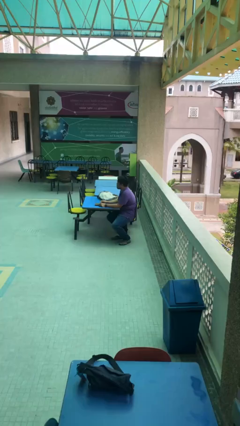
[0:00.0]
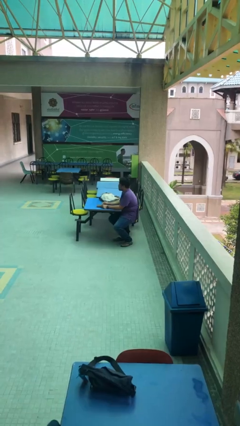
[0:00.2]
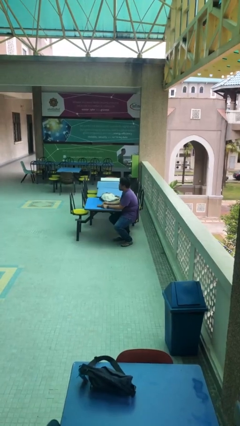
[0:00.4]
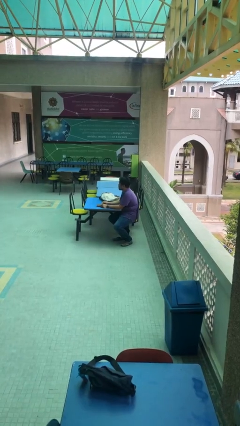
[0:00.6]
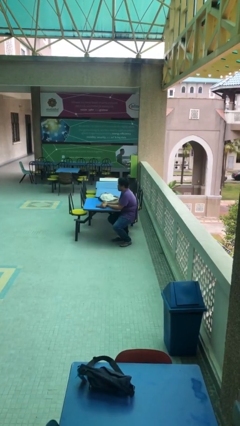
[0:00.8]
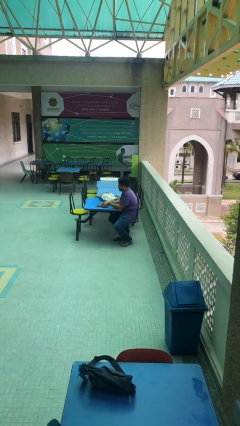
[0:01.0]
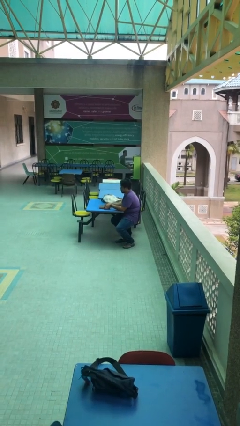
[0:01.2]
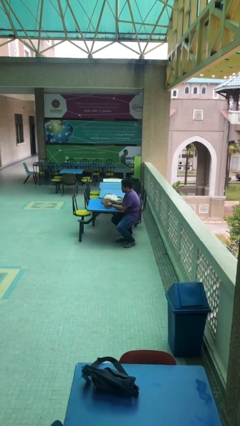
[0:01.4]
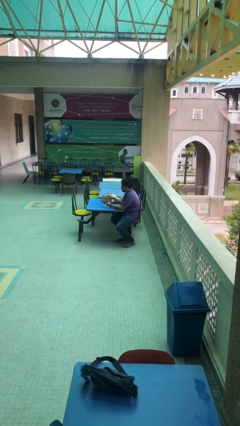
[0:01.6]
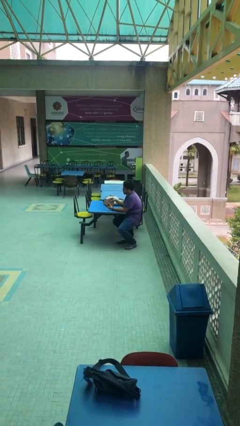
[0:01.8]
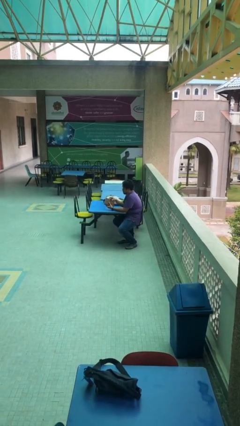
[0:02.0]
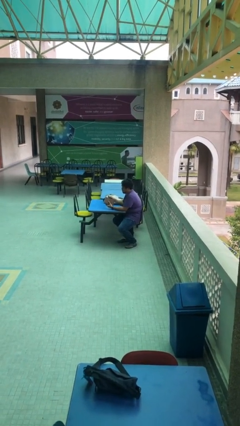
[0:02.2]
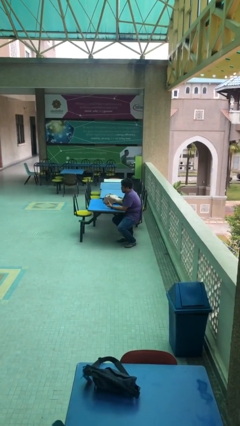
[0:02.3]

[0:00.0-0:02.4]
person picks up object from table

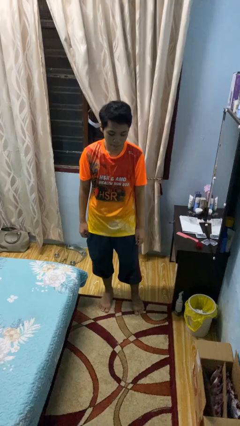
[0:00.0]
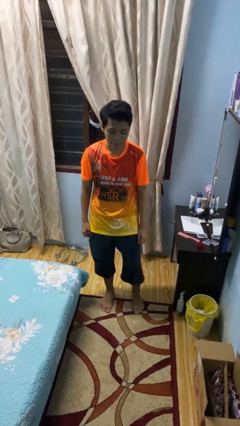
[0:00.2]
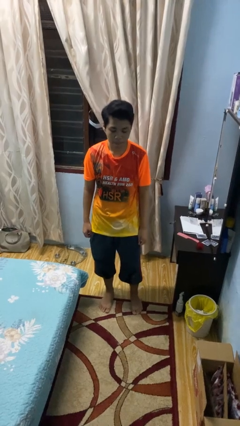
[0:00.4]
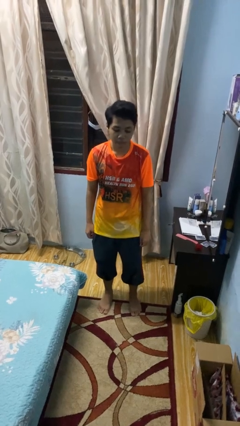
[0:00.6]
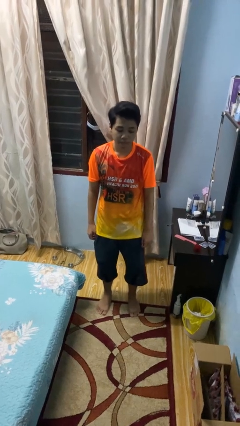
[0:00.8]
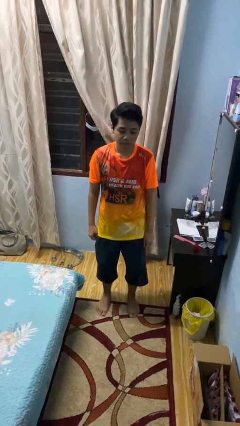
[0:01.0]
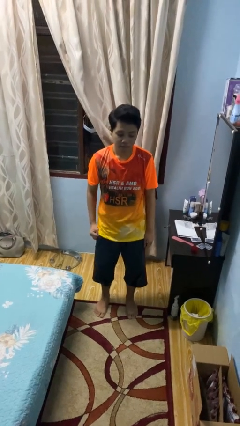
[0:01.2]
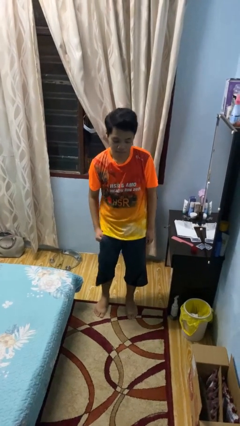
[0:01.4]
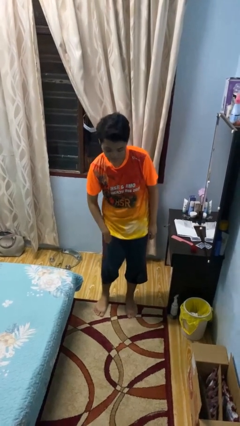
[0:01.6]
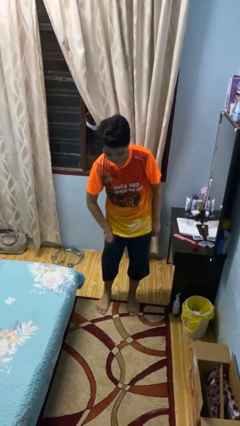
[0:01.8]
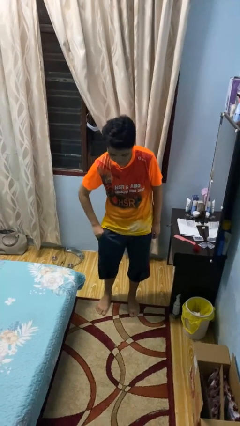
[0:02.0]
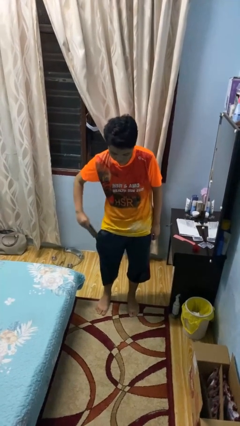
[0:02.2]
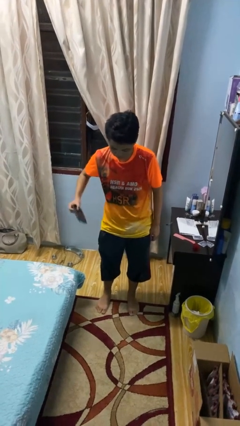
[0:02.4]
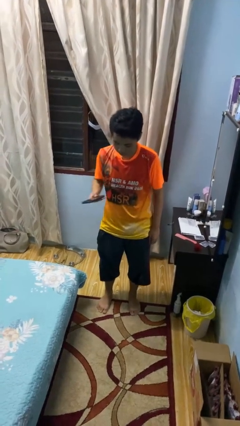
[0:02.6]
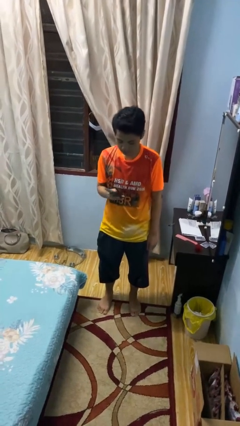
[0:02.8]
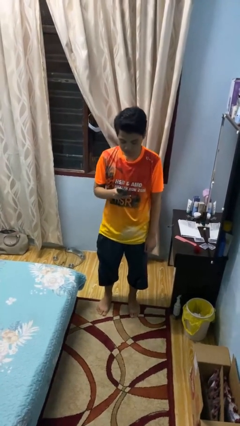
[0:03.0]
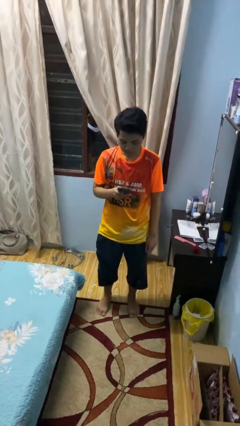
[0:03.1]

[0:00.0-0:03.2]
person takes phone from pocket

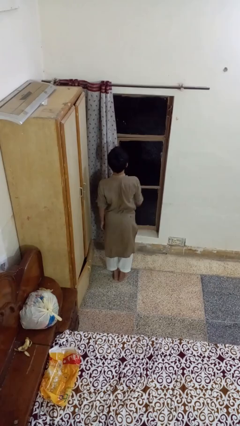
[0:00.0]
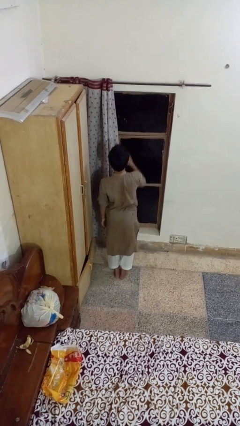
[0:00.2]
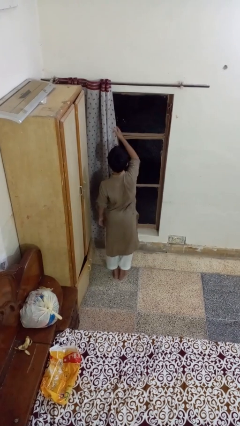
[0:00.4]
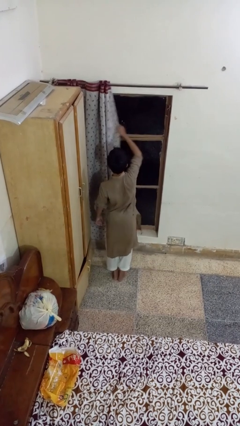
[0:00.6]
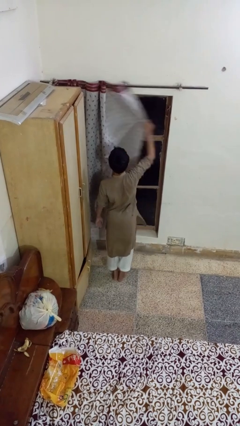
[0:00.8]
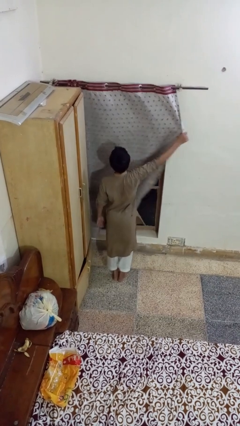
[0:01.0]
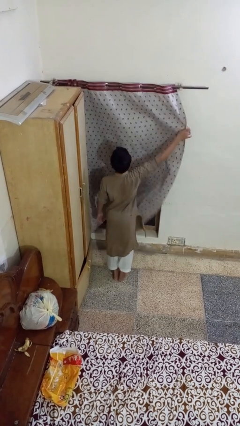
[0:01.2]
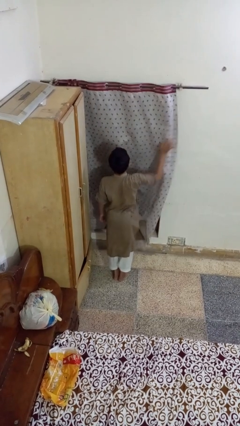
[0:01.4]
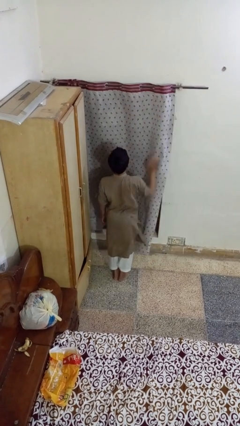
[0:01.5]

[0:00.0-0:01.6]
person closes curtains

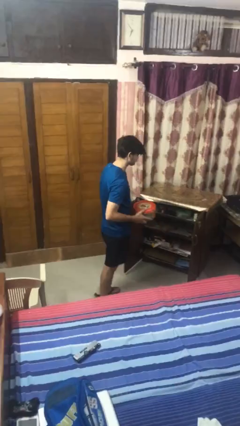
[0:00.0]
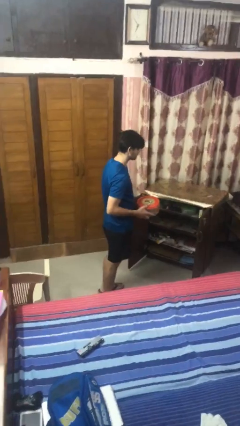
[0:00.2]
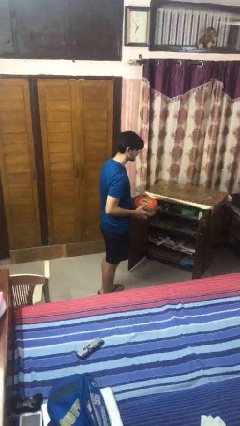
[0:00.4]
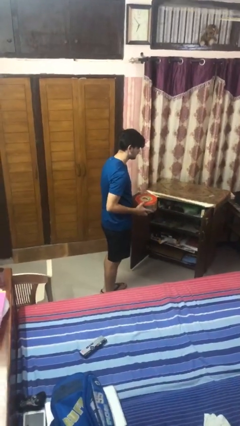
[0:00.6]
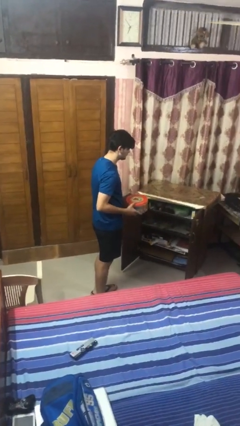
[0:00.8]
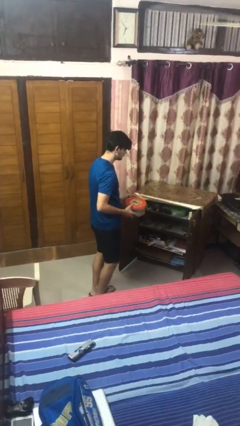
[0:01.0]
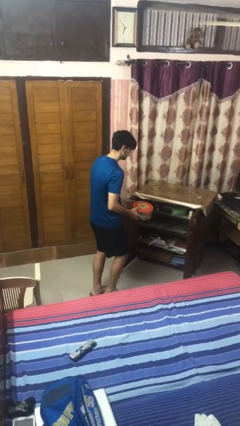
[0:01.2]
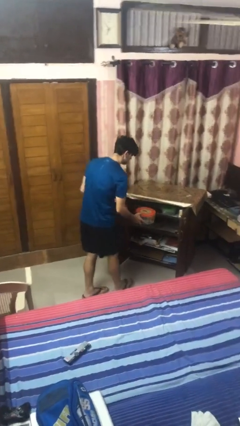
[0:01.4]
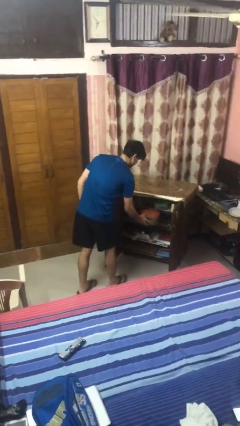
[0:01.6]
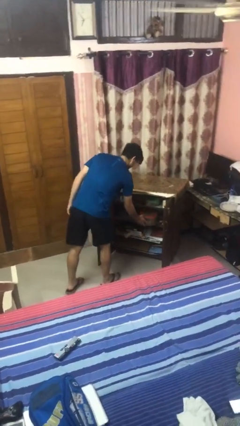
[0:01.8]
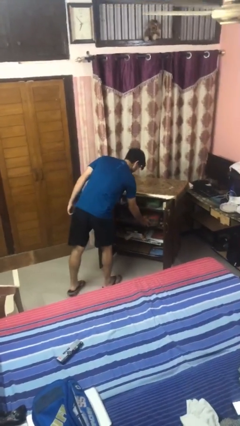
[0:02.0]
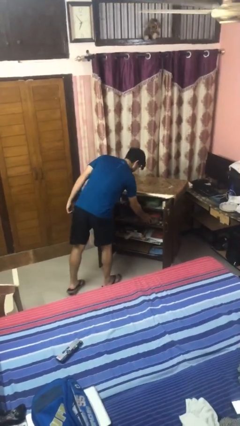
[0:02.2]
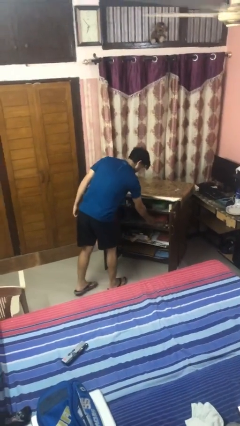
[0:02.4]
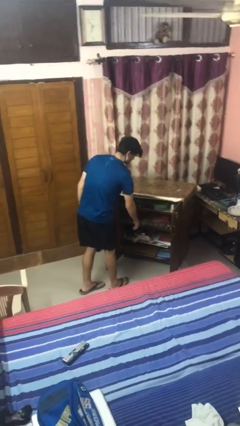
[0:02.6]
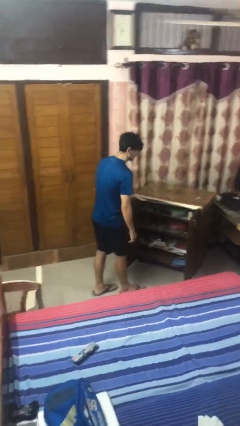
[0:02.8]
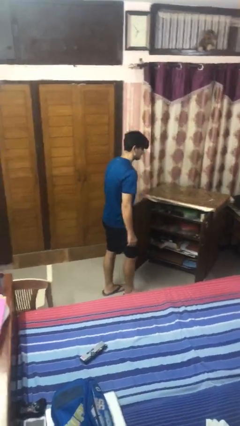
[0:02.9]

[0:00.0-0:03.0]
person puts down object into cabinet

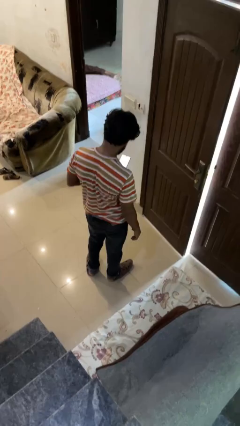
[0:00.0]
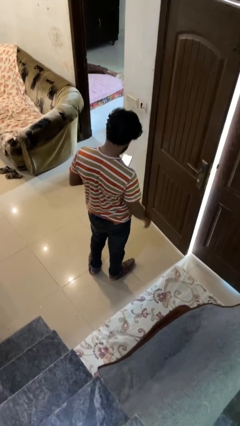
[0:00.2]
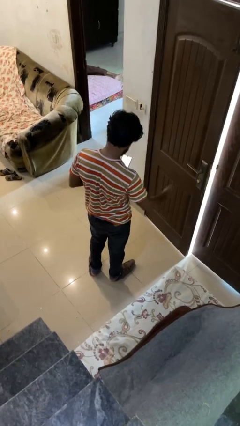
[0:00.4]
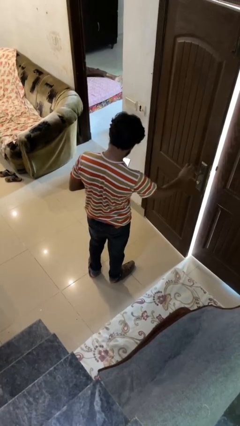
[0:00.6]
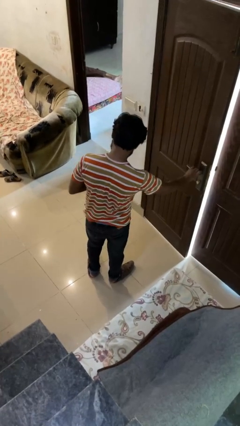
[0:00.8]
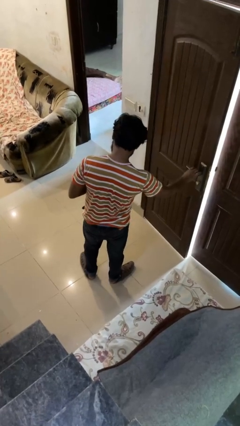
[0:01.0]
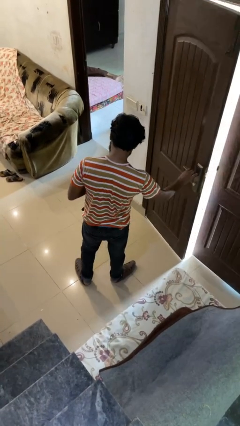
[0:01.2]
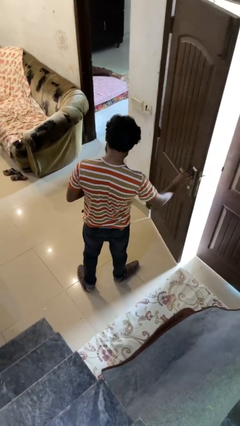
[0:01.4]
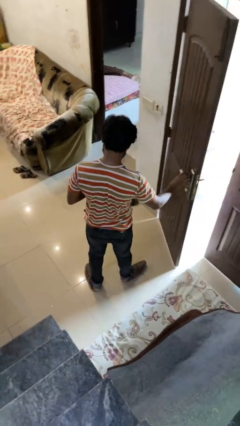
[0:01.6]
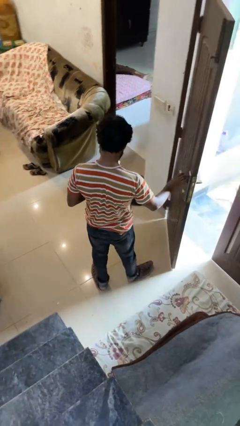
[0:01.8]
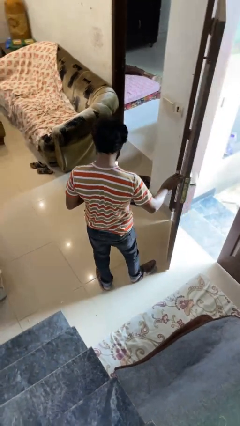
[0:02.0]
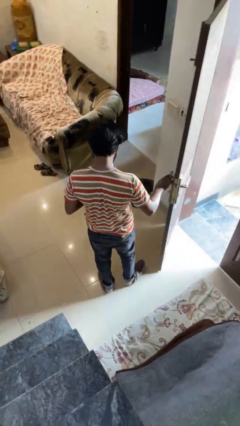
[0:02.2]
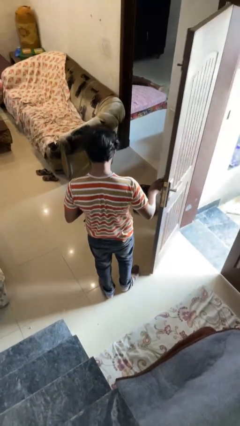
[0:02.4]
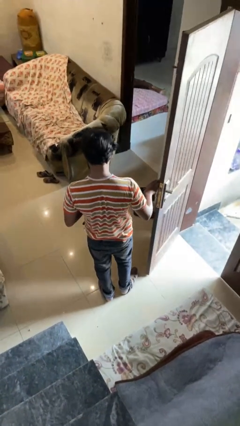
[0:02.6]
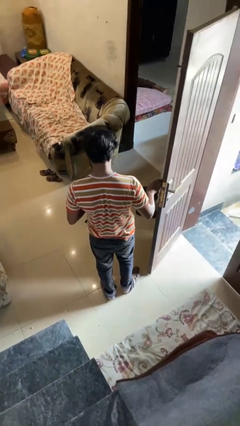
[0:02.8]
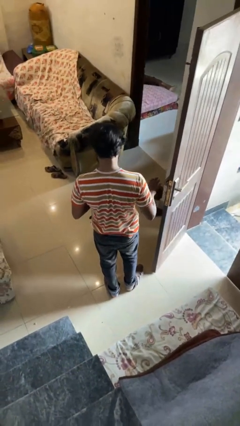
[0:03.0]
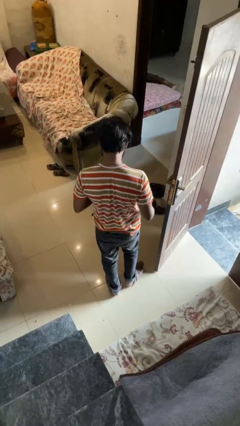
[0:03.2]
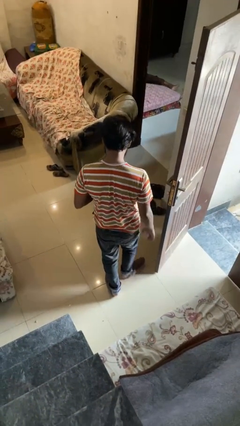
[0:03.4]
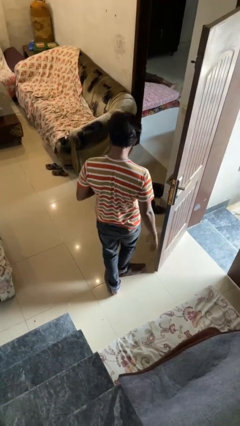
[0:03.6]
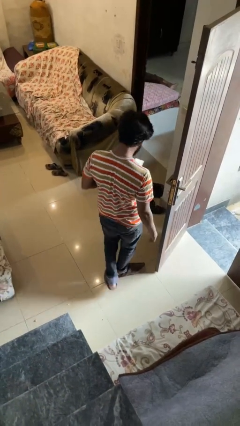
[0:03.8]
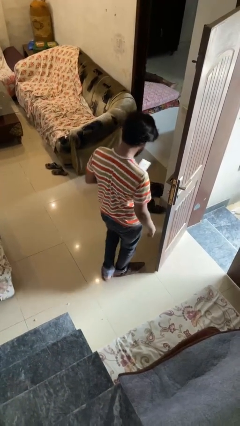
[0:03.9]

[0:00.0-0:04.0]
person opens facility door

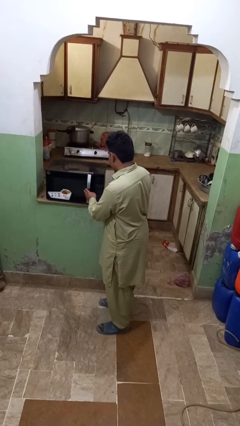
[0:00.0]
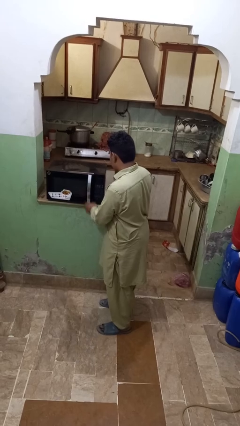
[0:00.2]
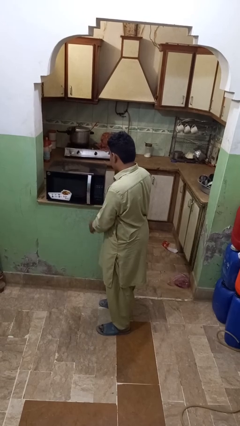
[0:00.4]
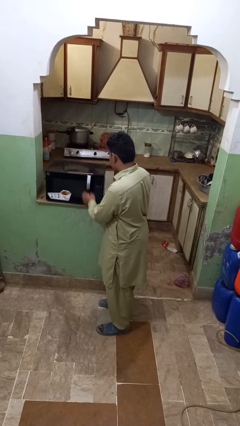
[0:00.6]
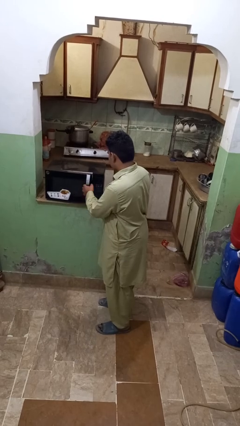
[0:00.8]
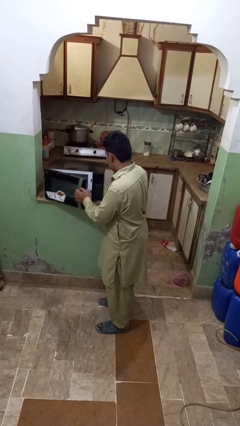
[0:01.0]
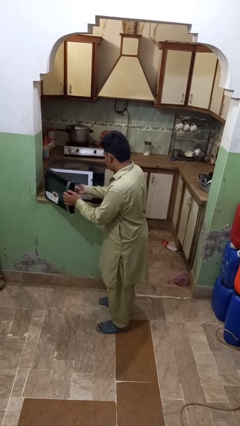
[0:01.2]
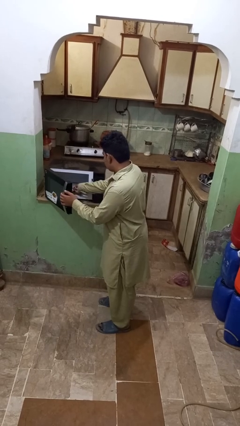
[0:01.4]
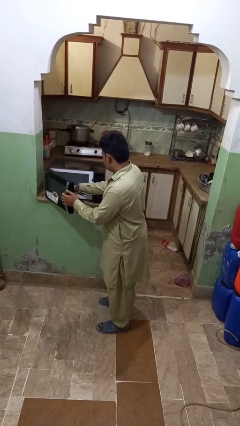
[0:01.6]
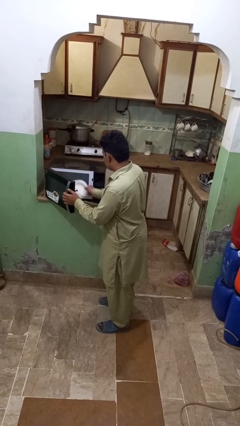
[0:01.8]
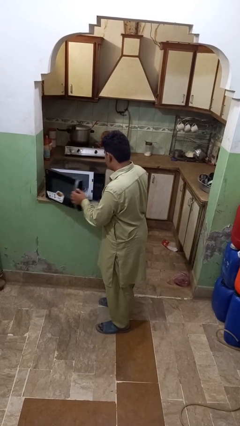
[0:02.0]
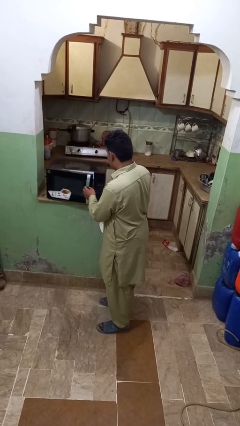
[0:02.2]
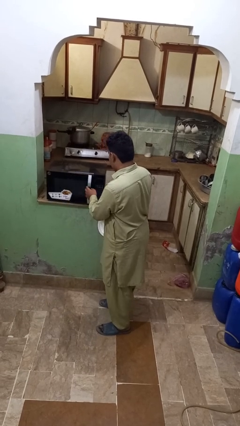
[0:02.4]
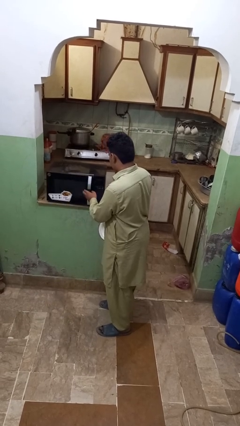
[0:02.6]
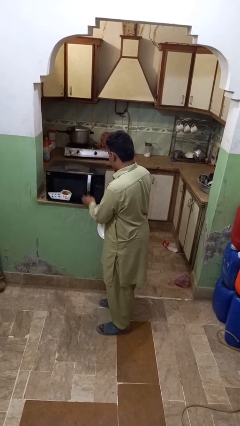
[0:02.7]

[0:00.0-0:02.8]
person takes object from microwave

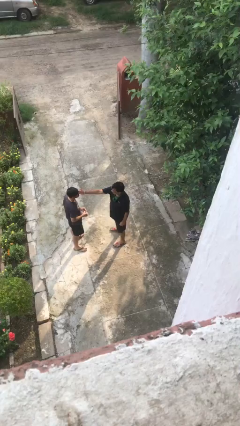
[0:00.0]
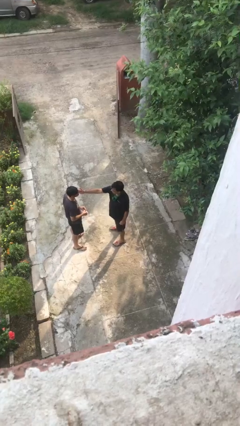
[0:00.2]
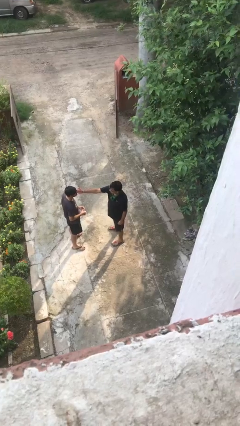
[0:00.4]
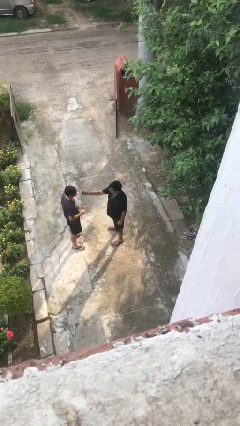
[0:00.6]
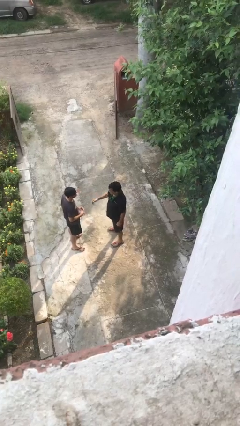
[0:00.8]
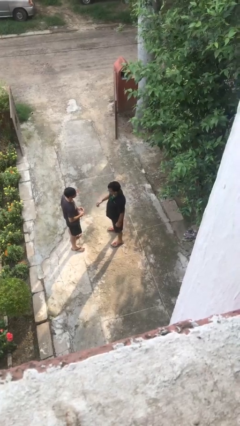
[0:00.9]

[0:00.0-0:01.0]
person touches face of person
